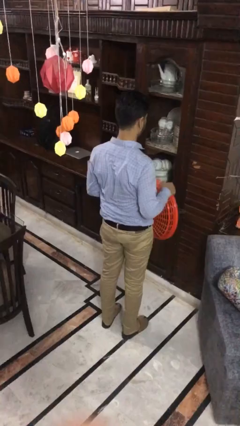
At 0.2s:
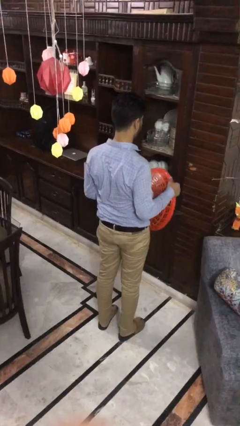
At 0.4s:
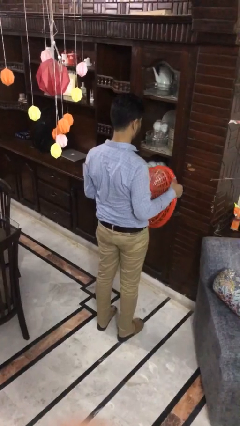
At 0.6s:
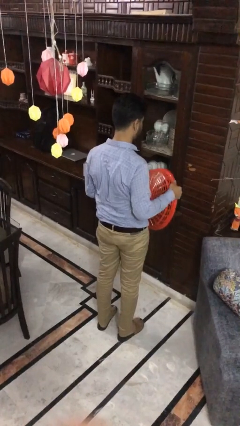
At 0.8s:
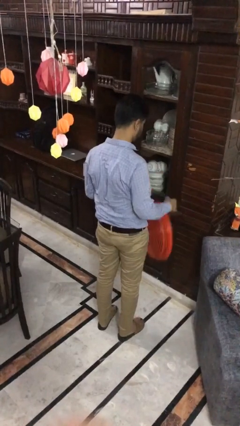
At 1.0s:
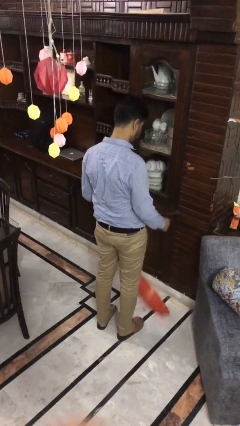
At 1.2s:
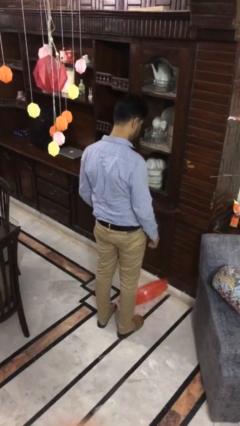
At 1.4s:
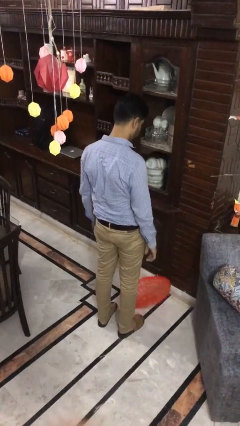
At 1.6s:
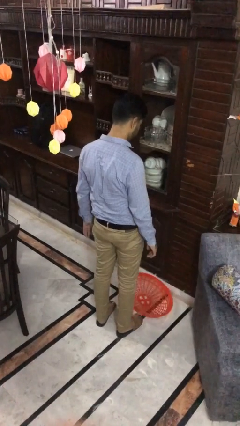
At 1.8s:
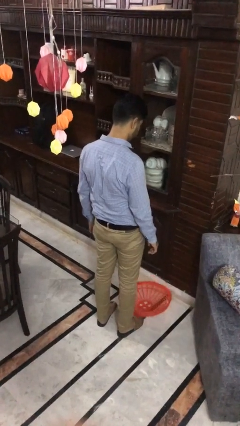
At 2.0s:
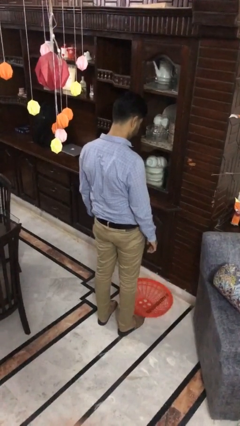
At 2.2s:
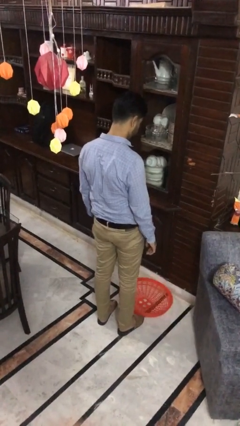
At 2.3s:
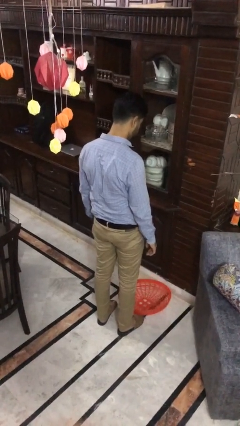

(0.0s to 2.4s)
person drops object

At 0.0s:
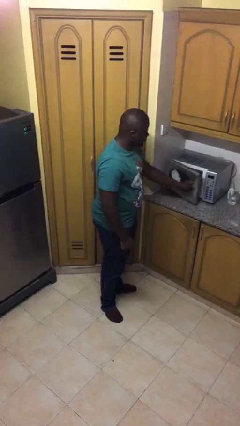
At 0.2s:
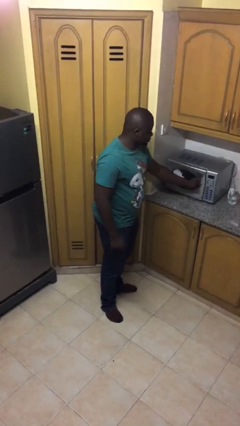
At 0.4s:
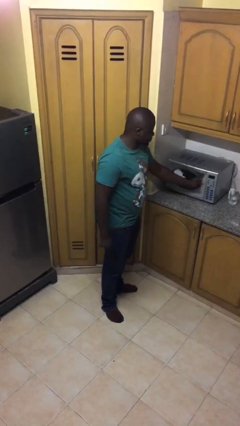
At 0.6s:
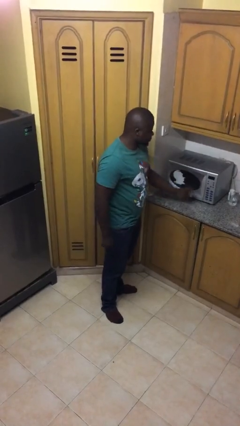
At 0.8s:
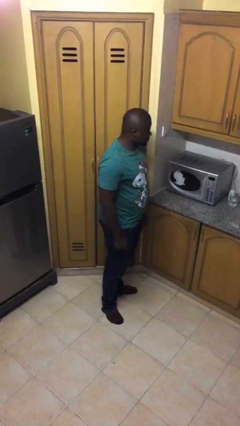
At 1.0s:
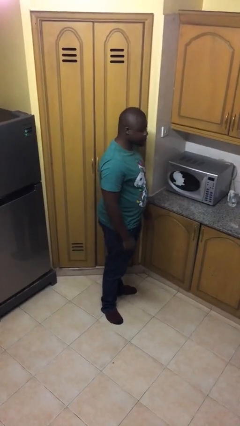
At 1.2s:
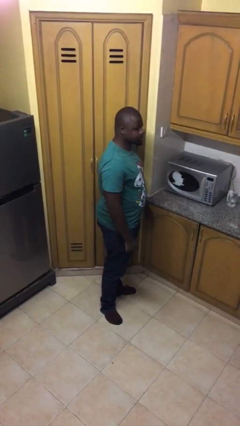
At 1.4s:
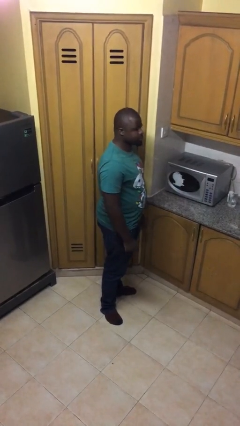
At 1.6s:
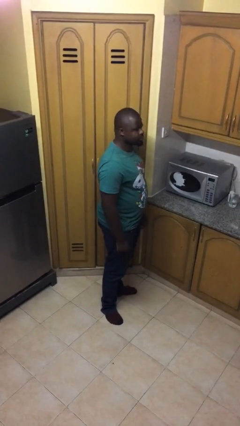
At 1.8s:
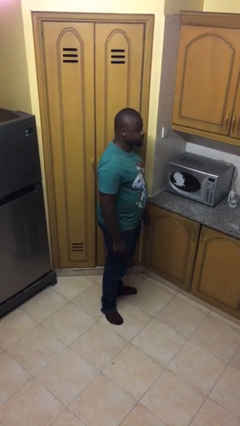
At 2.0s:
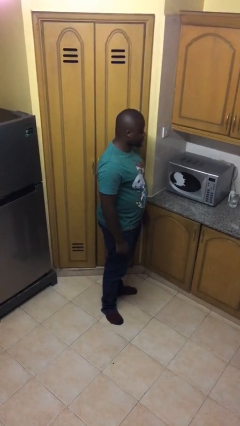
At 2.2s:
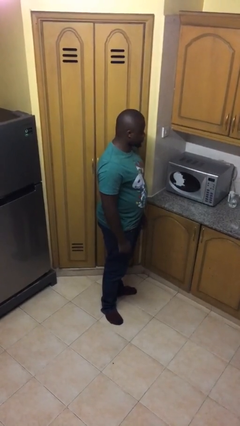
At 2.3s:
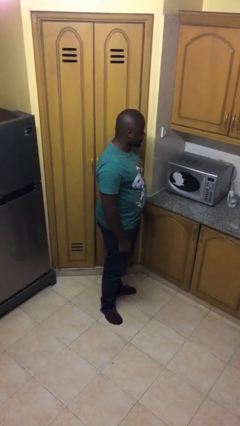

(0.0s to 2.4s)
person closes microwave

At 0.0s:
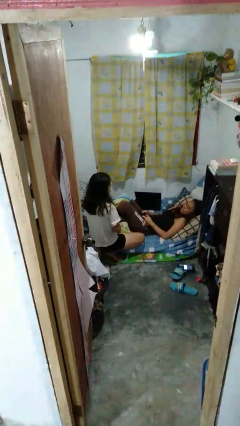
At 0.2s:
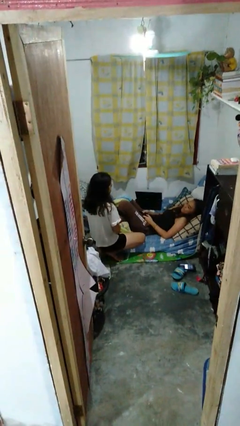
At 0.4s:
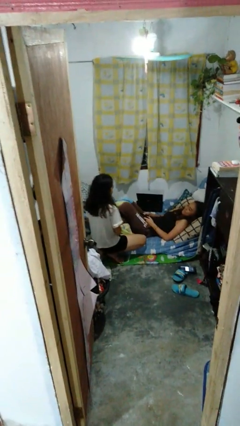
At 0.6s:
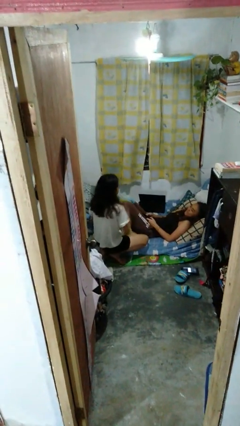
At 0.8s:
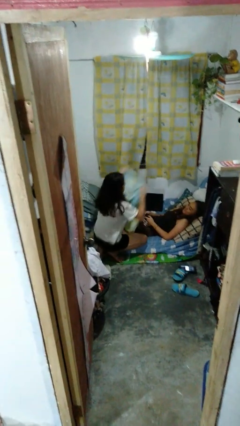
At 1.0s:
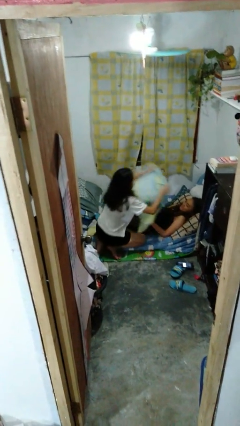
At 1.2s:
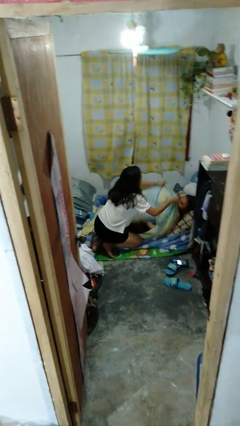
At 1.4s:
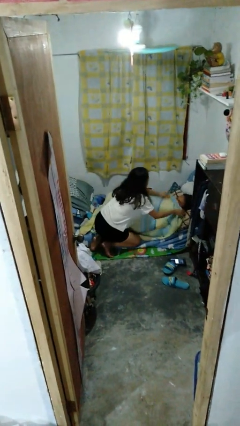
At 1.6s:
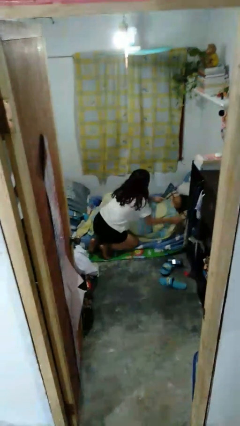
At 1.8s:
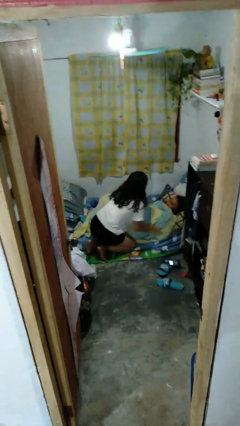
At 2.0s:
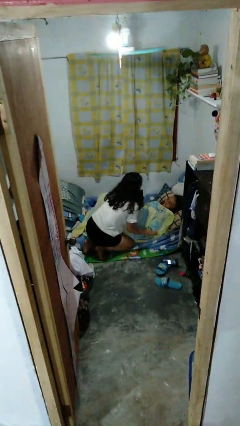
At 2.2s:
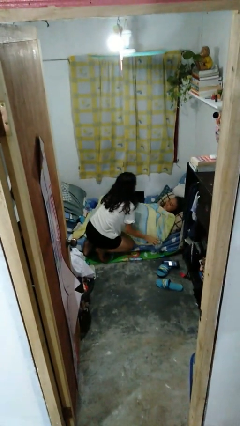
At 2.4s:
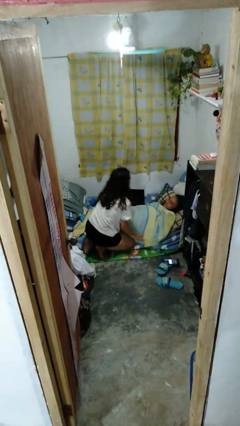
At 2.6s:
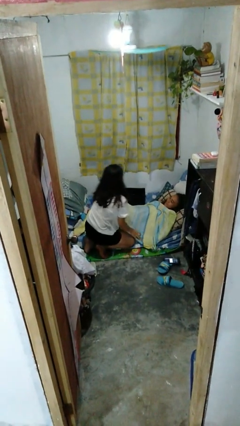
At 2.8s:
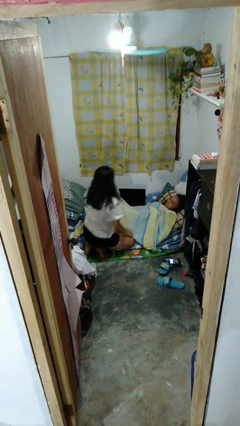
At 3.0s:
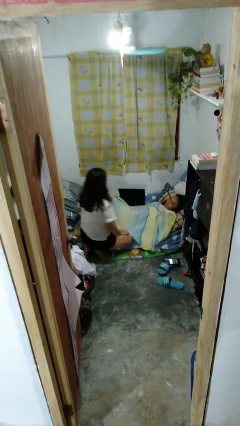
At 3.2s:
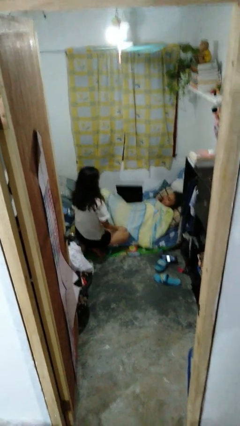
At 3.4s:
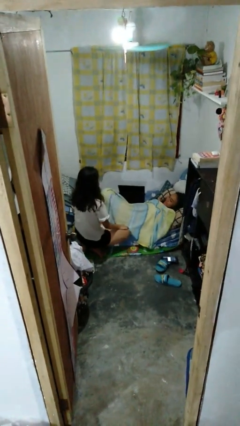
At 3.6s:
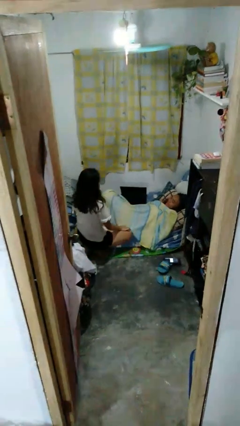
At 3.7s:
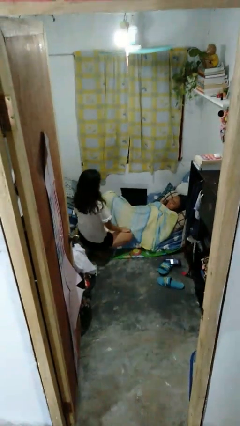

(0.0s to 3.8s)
person covers friend with blanket

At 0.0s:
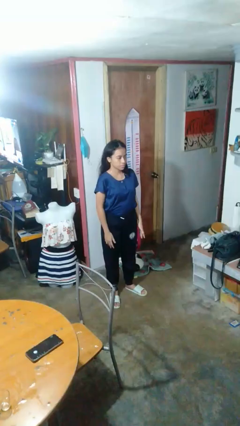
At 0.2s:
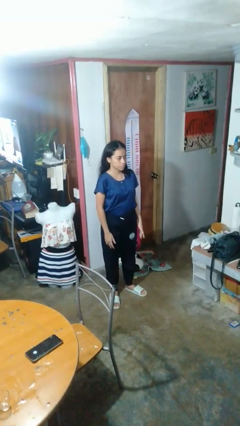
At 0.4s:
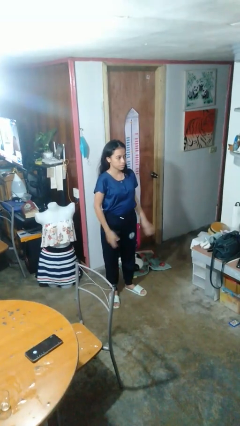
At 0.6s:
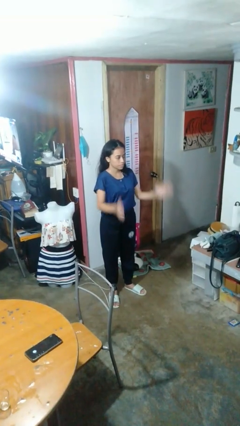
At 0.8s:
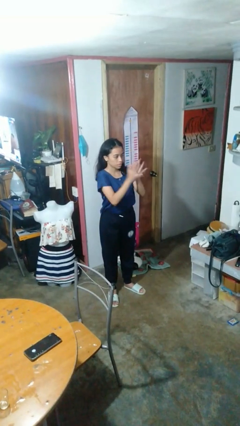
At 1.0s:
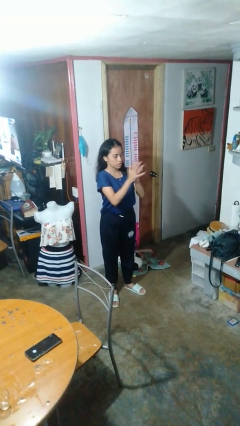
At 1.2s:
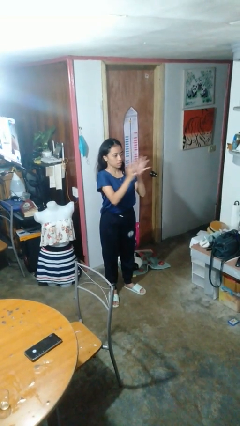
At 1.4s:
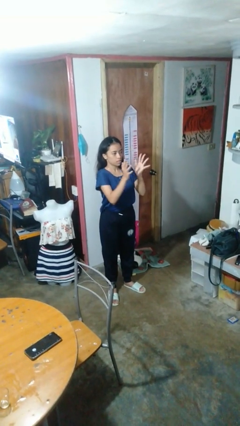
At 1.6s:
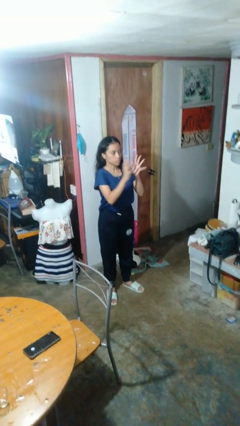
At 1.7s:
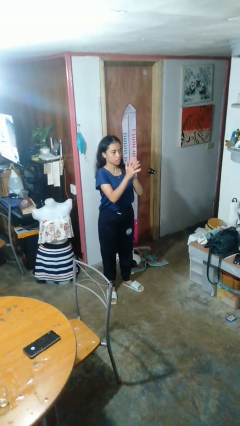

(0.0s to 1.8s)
person claps hands

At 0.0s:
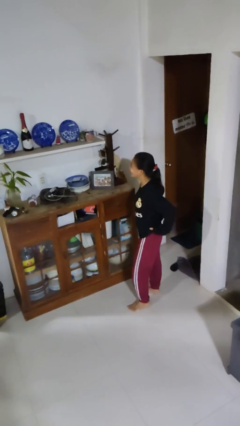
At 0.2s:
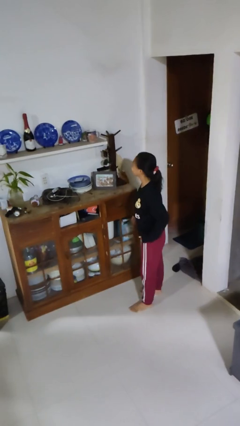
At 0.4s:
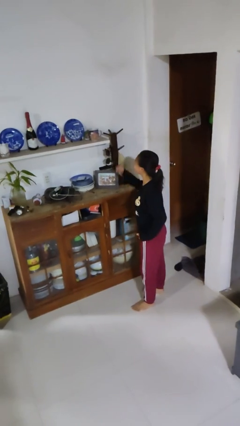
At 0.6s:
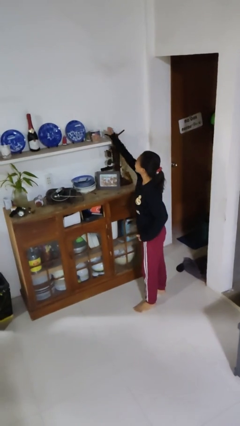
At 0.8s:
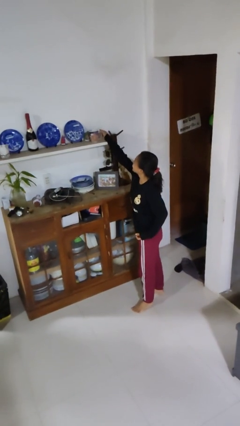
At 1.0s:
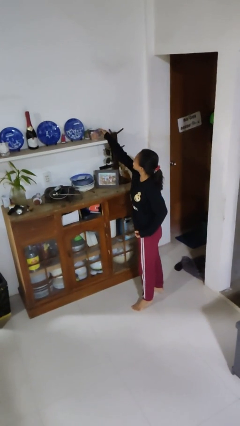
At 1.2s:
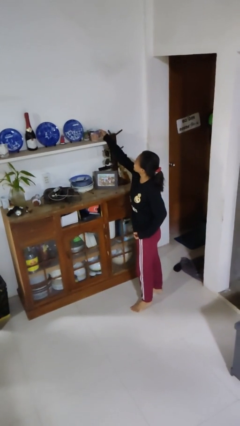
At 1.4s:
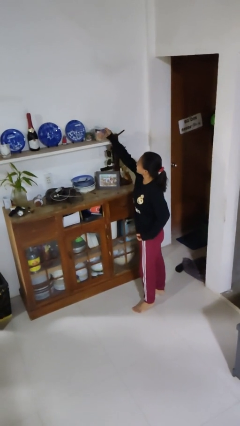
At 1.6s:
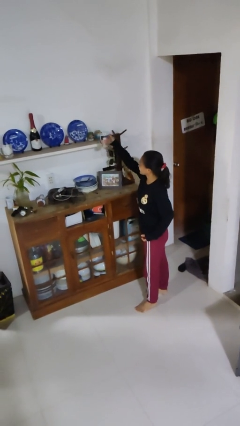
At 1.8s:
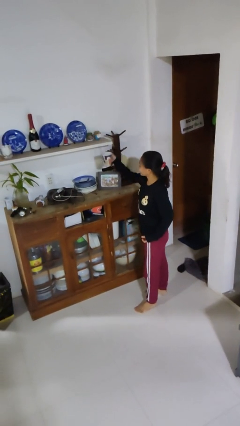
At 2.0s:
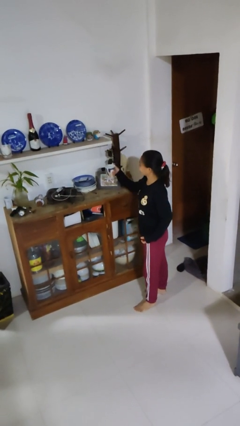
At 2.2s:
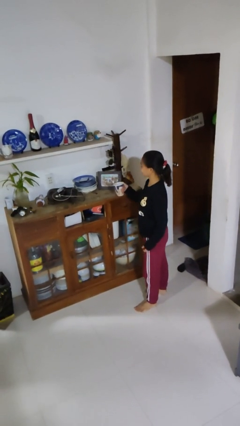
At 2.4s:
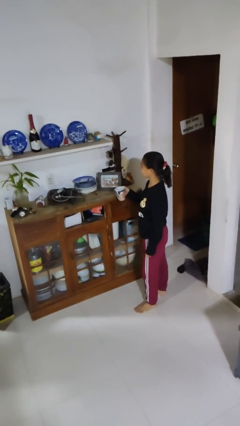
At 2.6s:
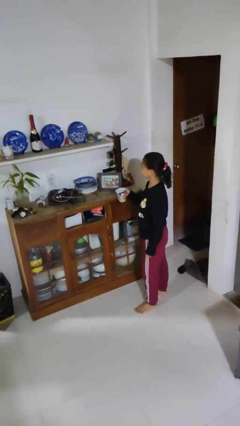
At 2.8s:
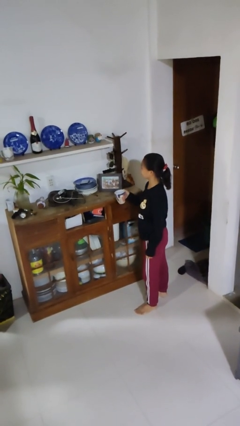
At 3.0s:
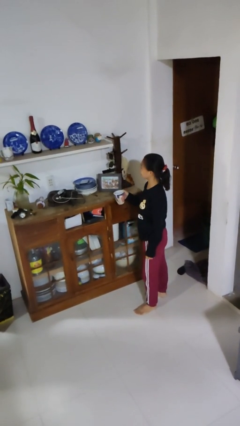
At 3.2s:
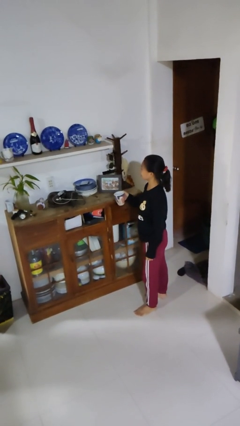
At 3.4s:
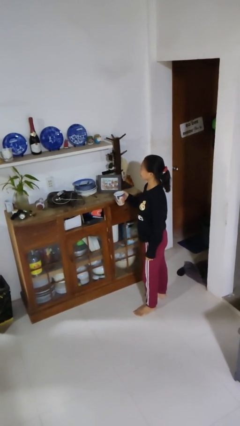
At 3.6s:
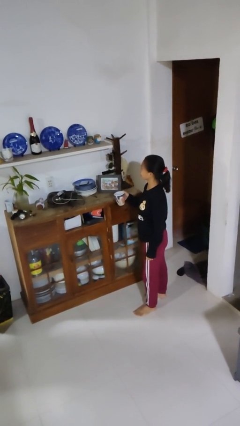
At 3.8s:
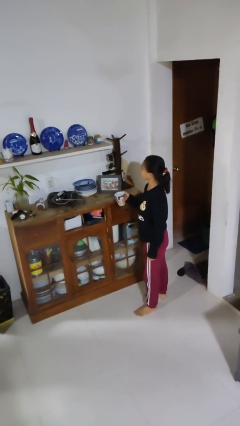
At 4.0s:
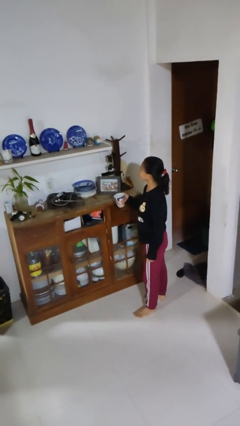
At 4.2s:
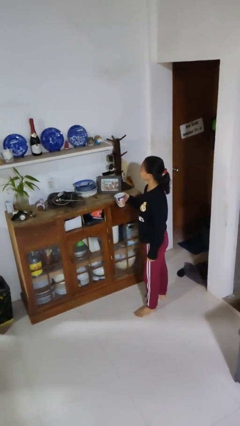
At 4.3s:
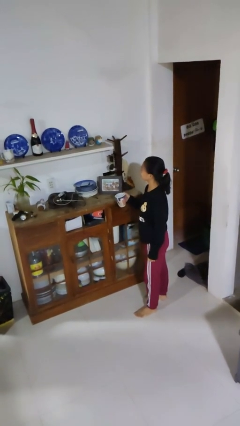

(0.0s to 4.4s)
person picks up object from shelf

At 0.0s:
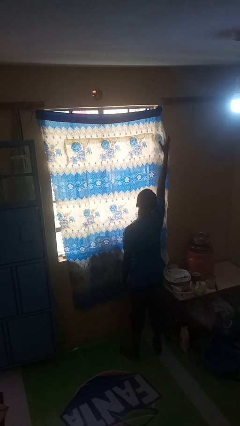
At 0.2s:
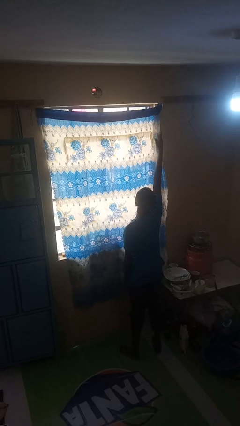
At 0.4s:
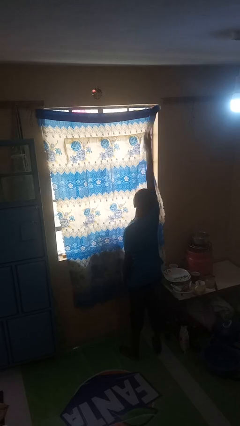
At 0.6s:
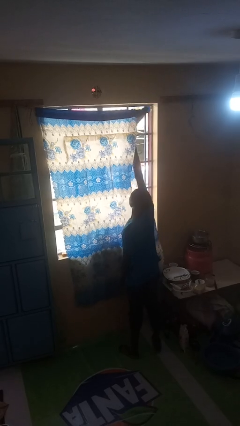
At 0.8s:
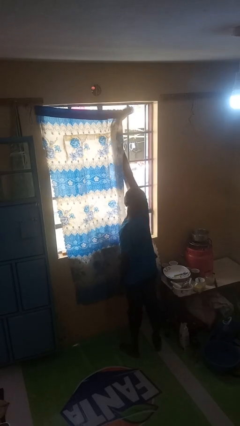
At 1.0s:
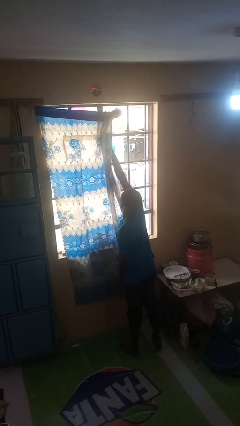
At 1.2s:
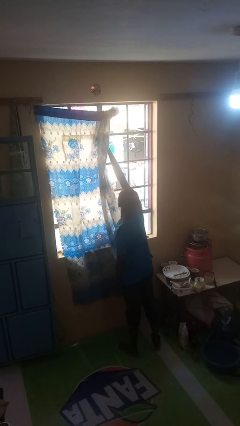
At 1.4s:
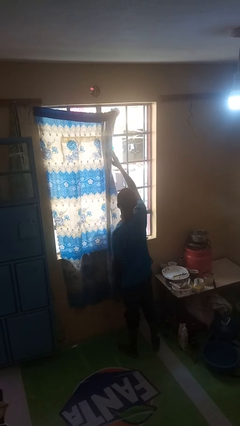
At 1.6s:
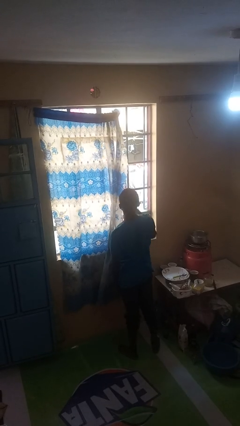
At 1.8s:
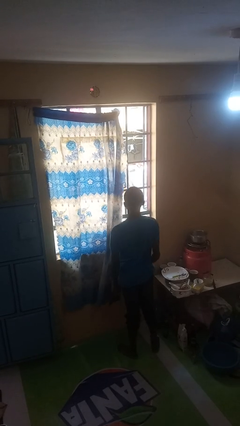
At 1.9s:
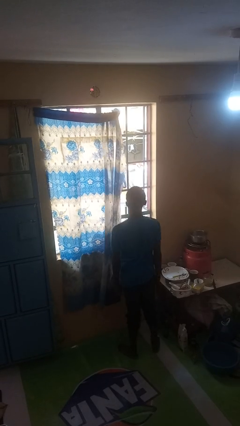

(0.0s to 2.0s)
person opens curtains
